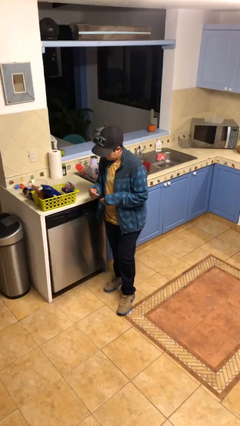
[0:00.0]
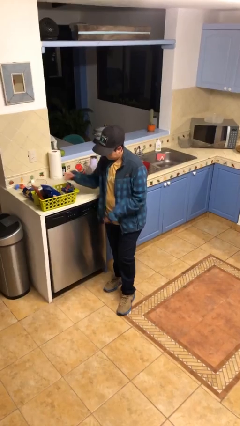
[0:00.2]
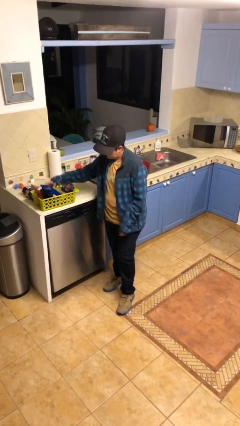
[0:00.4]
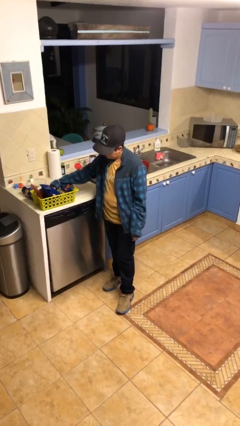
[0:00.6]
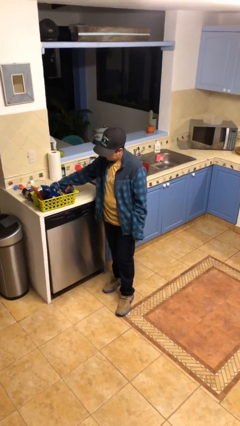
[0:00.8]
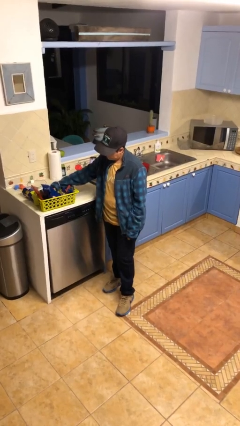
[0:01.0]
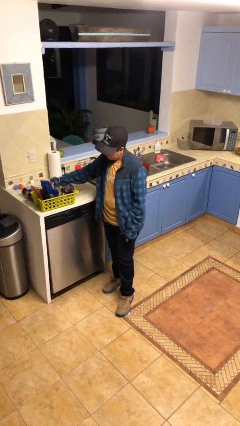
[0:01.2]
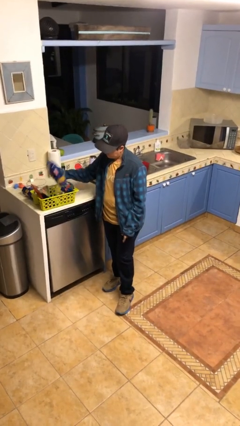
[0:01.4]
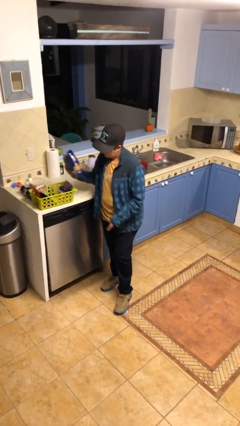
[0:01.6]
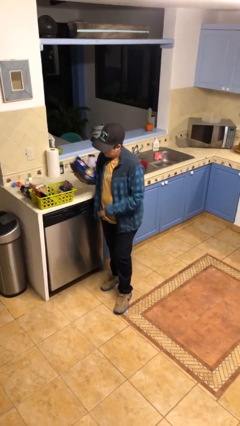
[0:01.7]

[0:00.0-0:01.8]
person takes object from basket

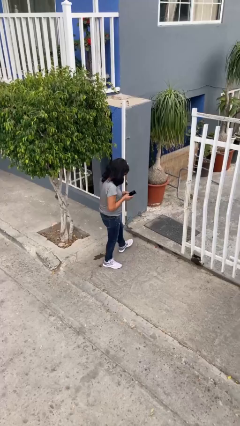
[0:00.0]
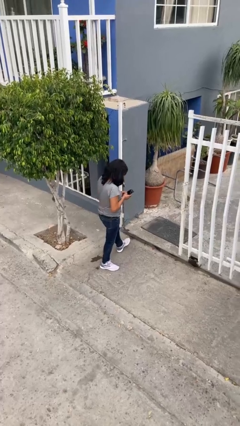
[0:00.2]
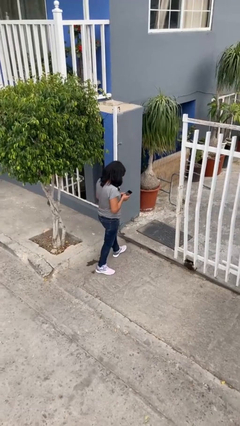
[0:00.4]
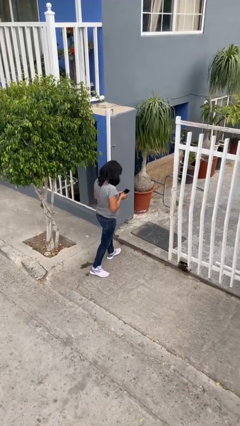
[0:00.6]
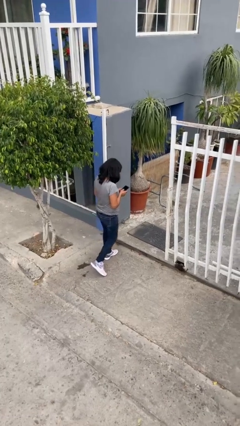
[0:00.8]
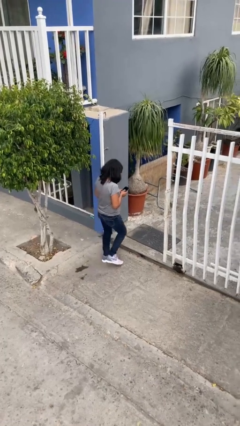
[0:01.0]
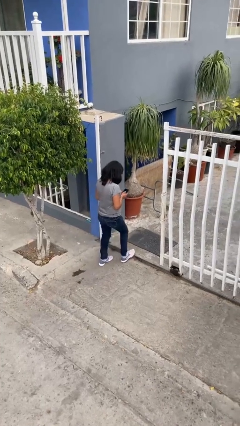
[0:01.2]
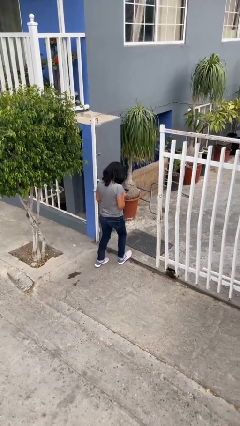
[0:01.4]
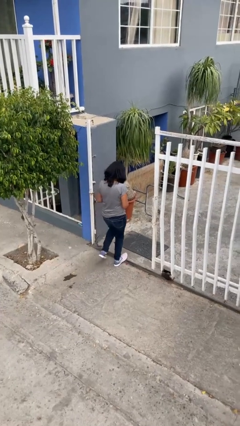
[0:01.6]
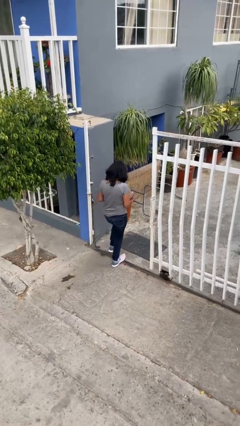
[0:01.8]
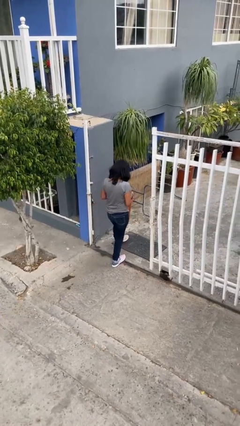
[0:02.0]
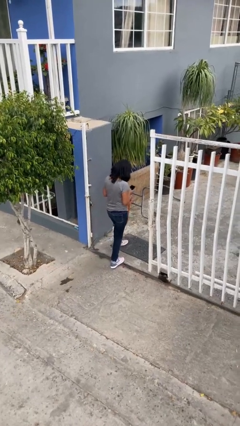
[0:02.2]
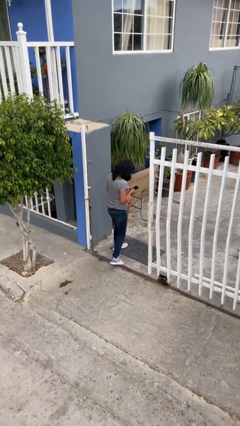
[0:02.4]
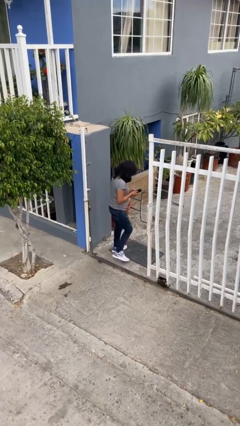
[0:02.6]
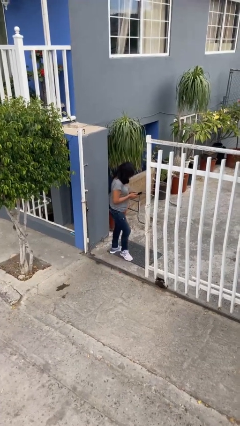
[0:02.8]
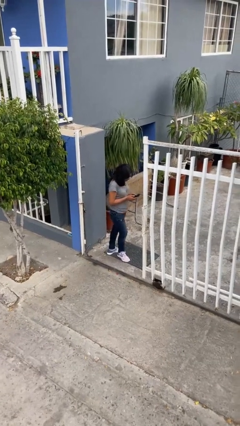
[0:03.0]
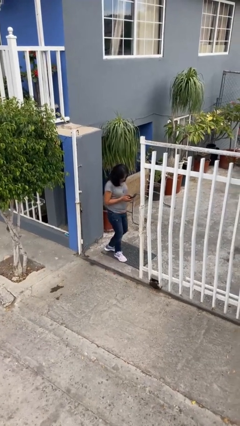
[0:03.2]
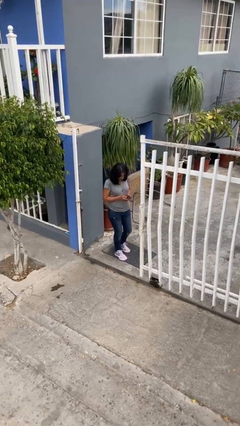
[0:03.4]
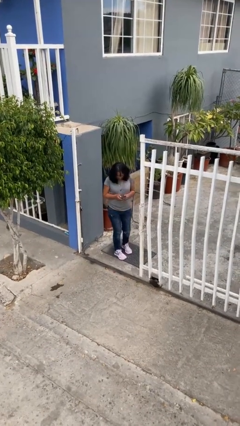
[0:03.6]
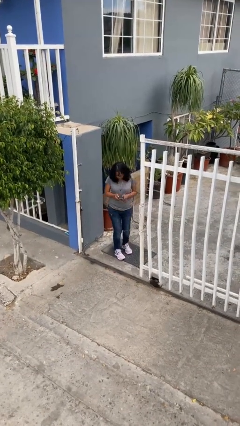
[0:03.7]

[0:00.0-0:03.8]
person exits scene through structure

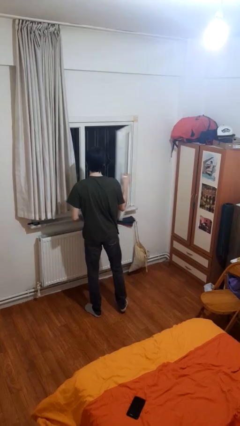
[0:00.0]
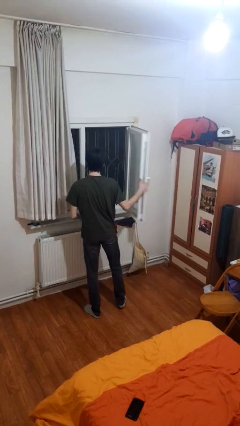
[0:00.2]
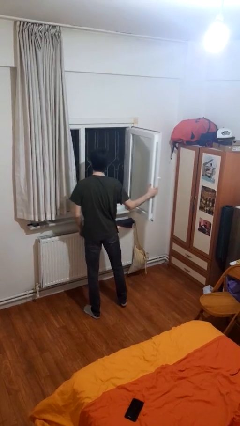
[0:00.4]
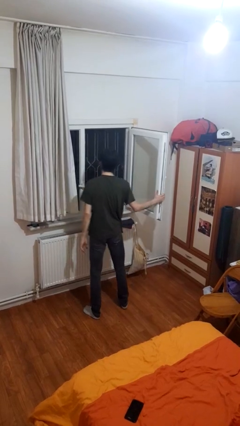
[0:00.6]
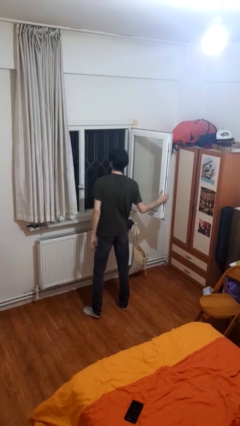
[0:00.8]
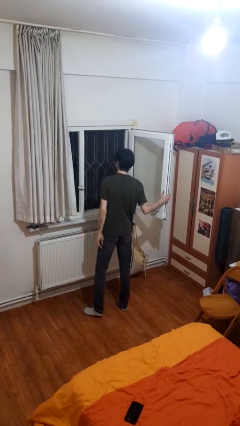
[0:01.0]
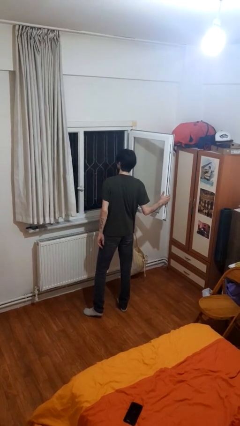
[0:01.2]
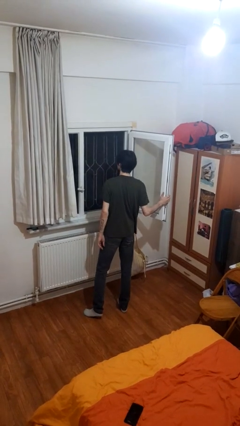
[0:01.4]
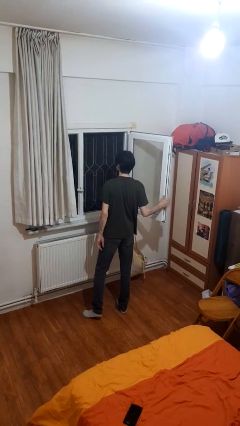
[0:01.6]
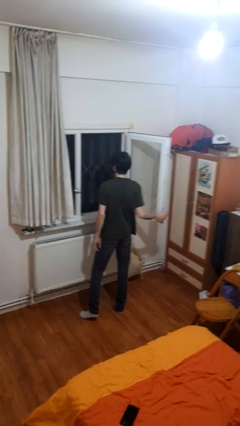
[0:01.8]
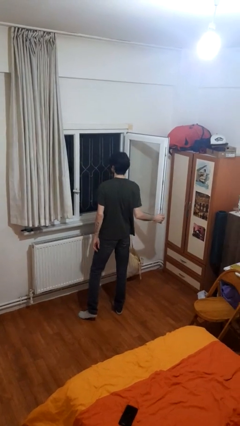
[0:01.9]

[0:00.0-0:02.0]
person opens home window

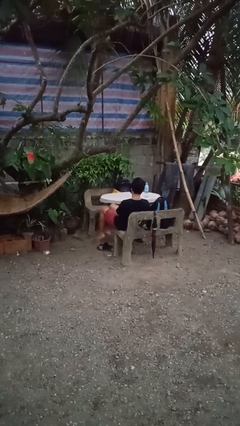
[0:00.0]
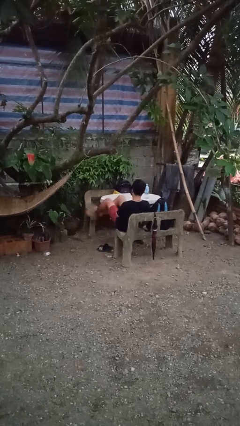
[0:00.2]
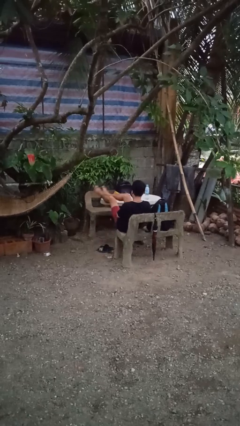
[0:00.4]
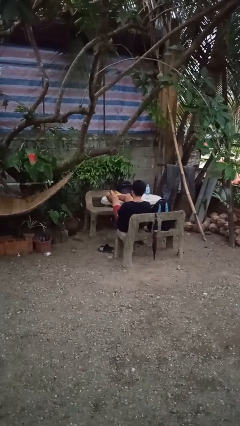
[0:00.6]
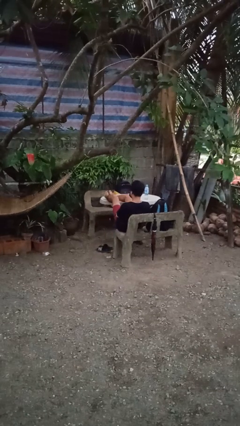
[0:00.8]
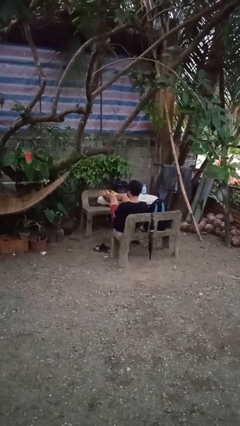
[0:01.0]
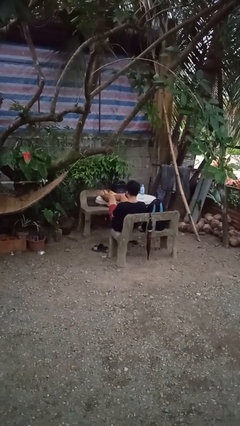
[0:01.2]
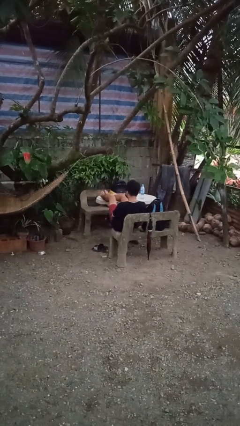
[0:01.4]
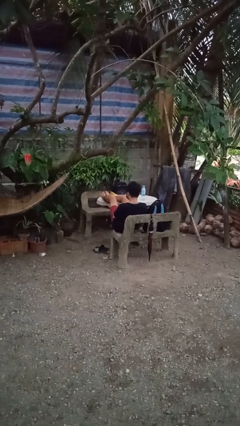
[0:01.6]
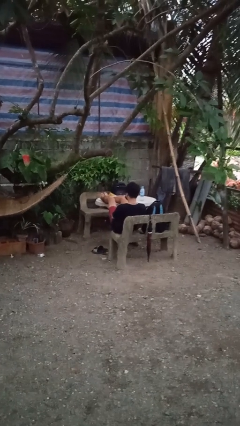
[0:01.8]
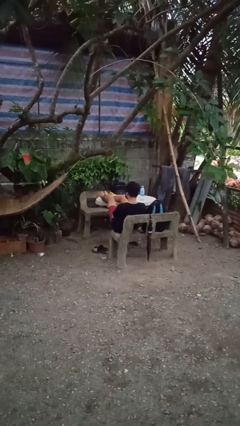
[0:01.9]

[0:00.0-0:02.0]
person puts feet up

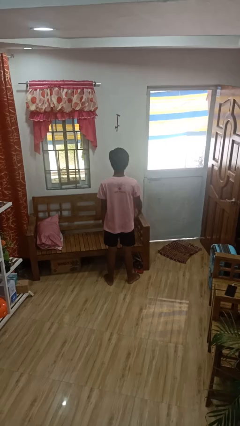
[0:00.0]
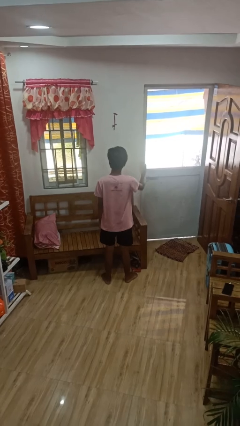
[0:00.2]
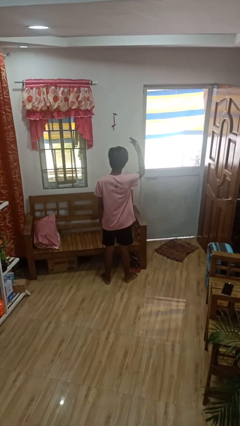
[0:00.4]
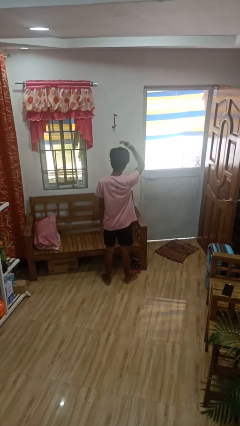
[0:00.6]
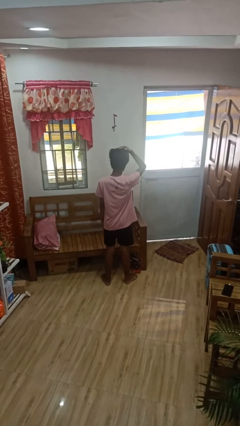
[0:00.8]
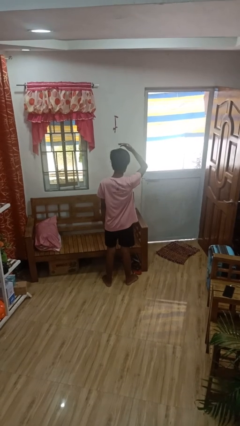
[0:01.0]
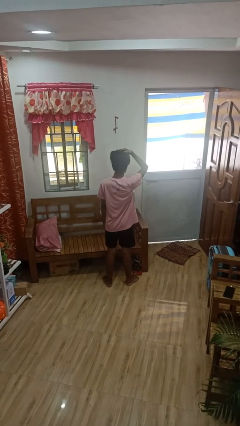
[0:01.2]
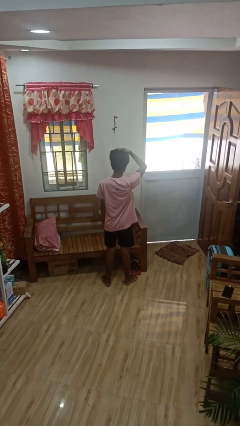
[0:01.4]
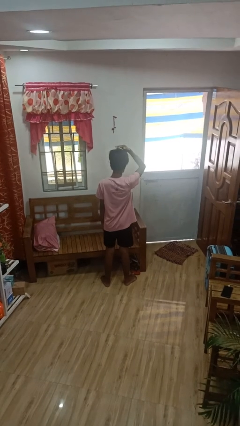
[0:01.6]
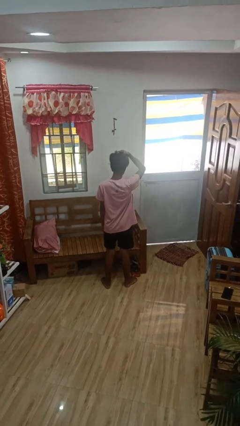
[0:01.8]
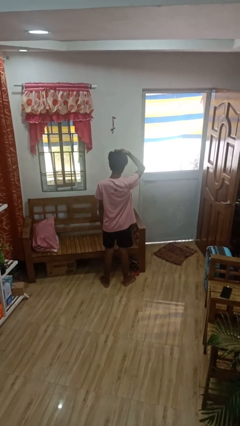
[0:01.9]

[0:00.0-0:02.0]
person pats head

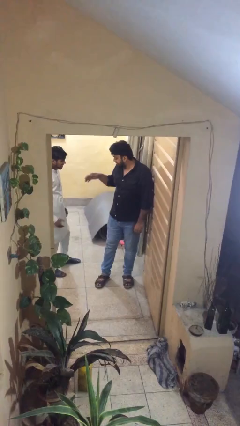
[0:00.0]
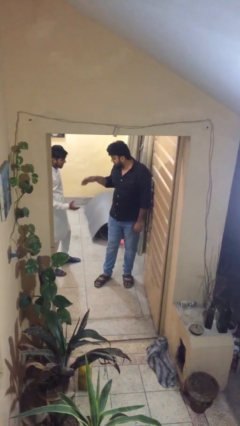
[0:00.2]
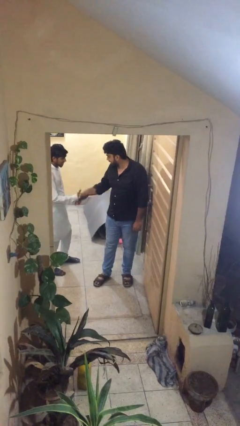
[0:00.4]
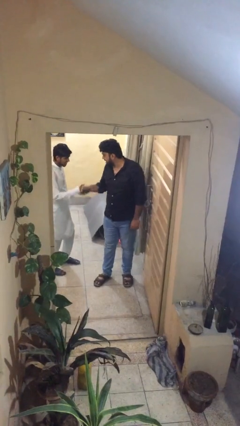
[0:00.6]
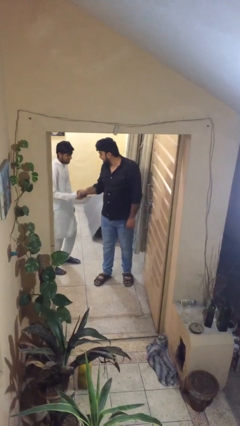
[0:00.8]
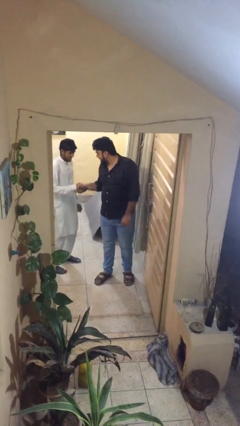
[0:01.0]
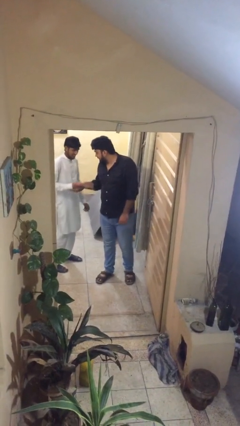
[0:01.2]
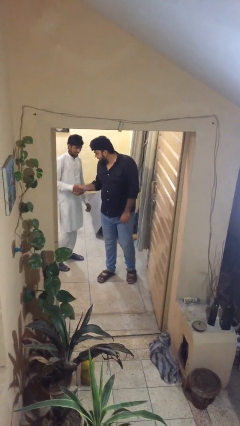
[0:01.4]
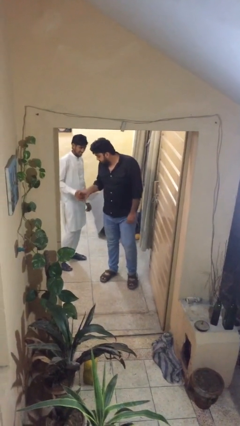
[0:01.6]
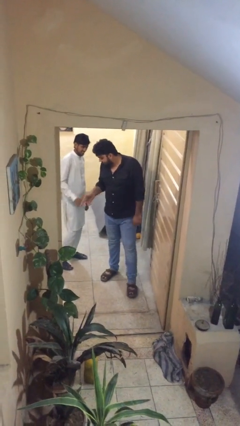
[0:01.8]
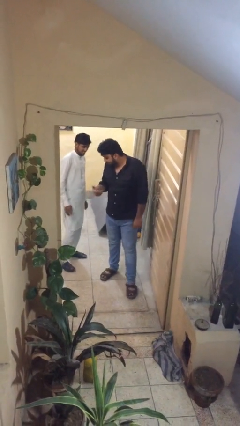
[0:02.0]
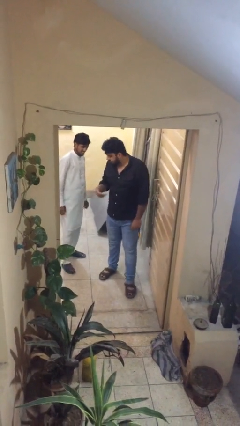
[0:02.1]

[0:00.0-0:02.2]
person shakes hand

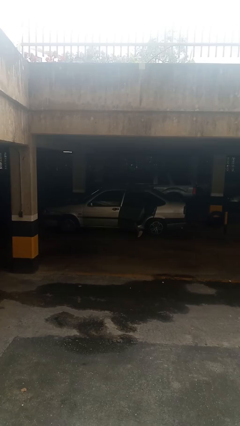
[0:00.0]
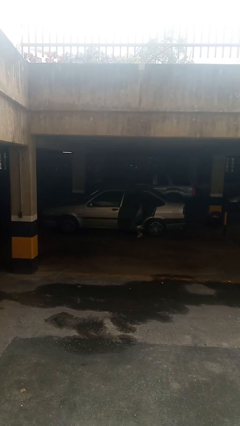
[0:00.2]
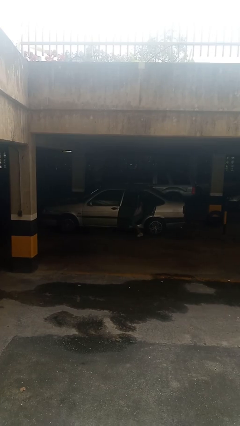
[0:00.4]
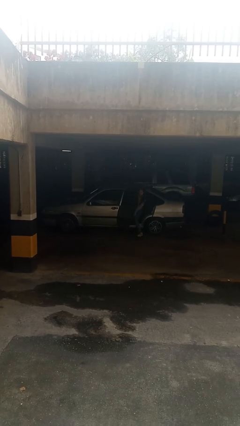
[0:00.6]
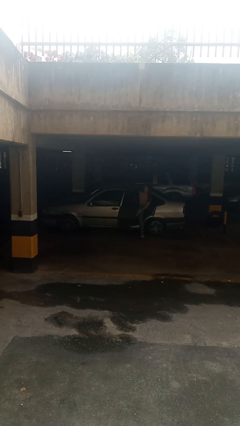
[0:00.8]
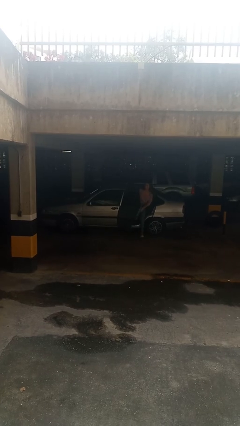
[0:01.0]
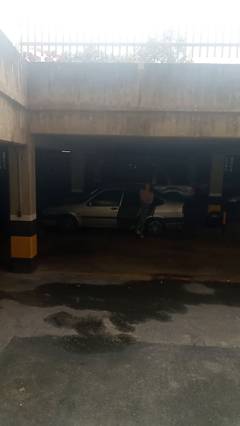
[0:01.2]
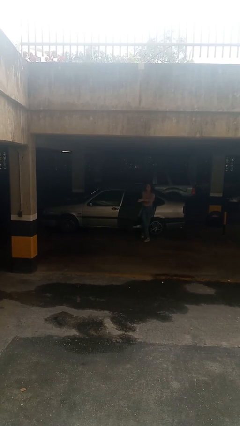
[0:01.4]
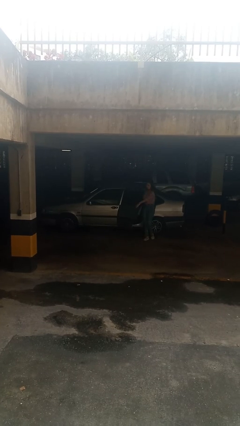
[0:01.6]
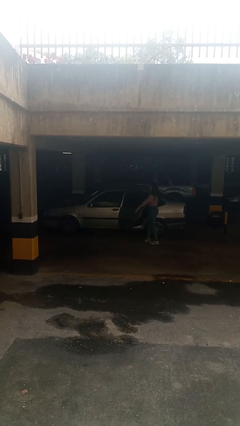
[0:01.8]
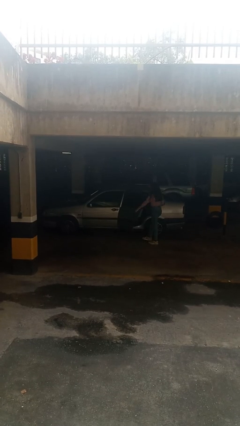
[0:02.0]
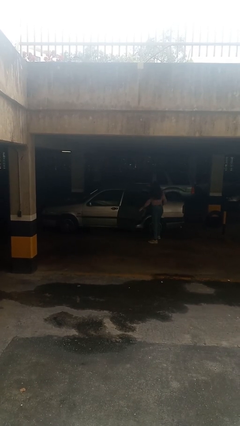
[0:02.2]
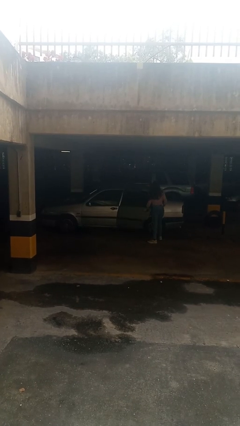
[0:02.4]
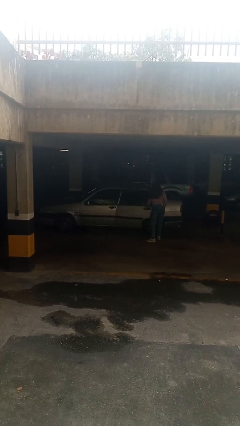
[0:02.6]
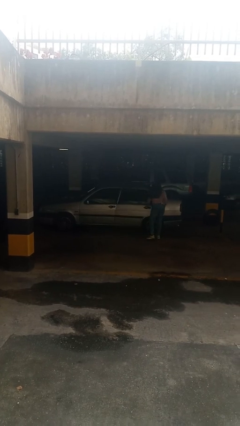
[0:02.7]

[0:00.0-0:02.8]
car drops off person

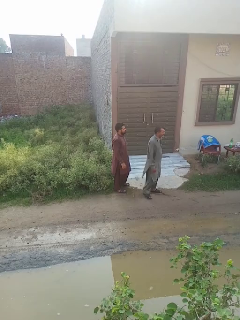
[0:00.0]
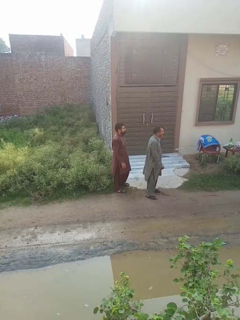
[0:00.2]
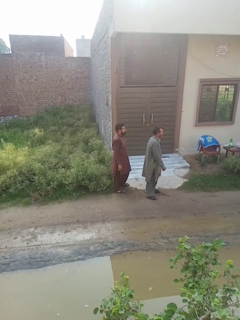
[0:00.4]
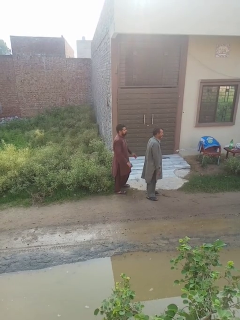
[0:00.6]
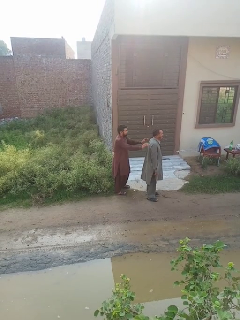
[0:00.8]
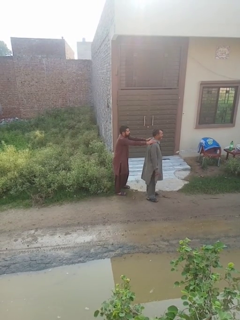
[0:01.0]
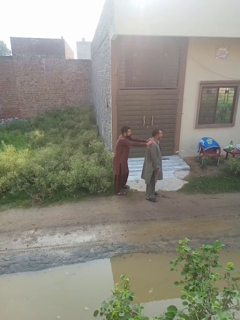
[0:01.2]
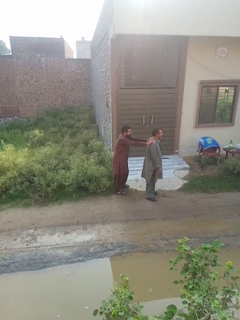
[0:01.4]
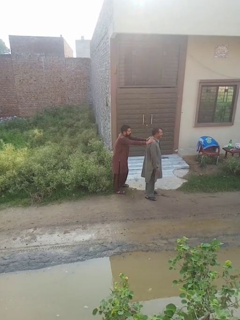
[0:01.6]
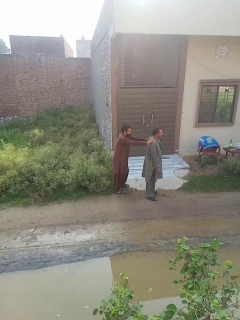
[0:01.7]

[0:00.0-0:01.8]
person grabs person by shoulder
